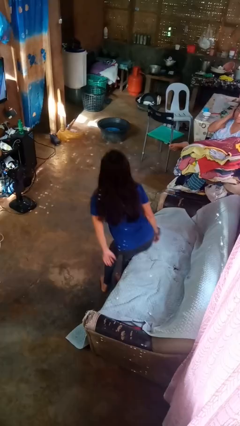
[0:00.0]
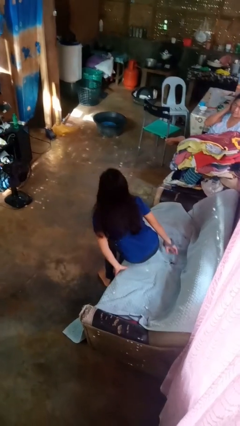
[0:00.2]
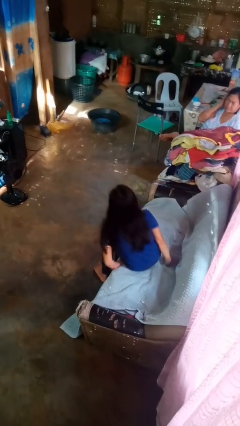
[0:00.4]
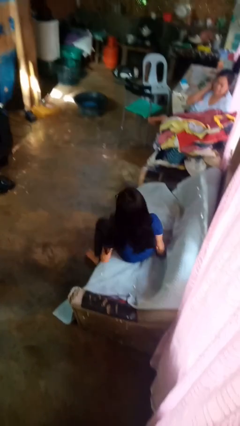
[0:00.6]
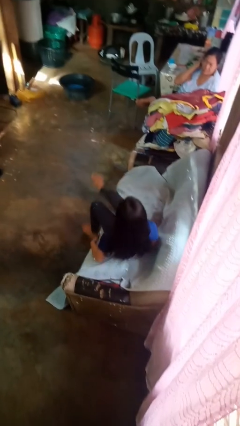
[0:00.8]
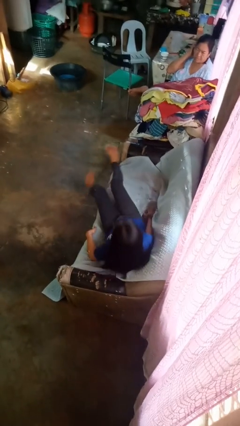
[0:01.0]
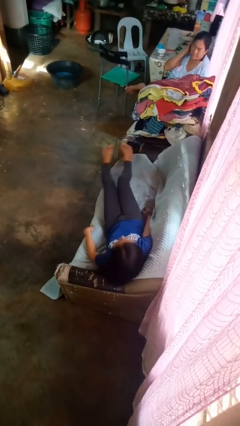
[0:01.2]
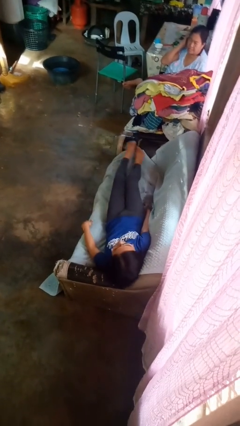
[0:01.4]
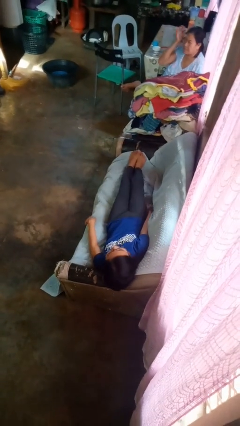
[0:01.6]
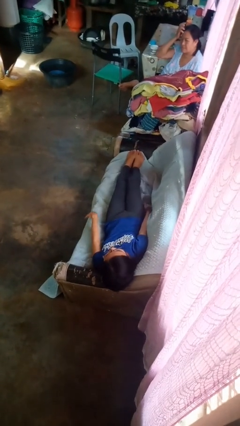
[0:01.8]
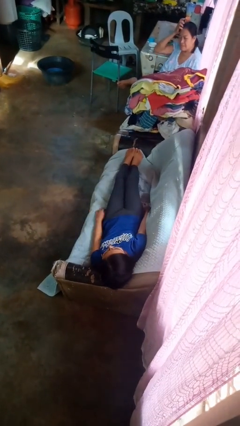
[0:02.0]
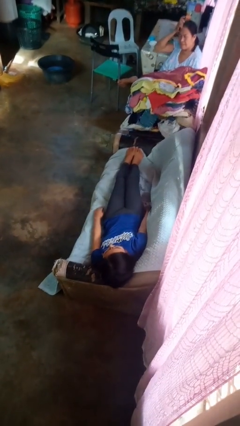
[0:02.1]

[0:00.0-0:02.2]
person lies down on couch

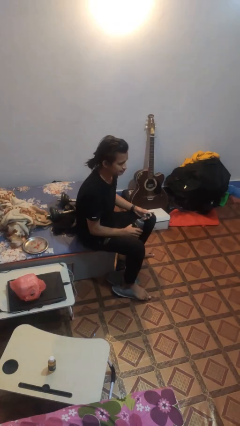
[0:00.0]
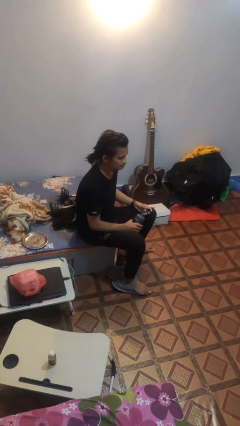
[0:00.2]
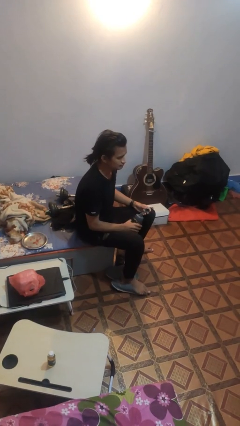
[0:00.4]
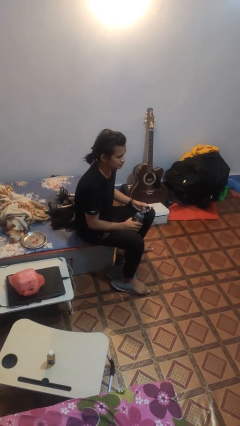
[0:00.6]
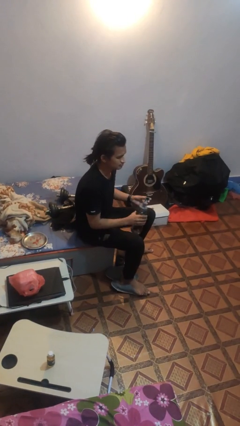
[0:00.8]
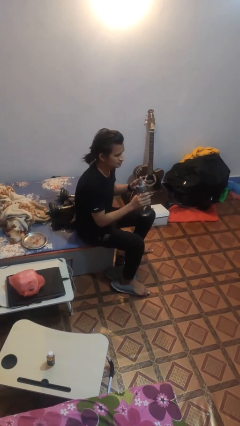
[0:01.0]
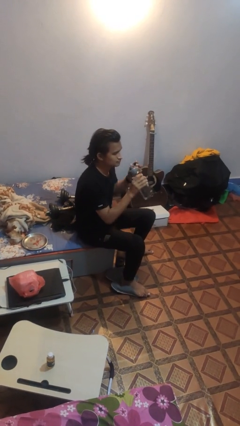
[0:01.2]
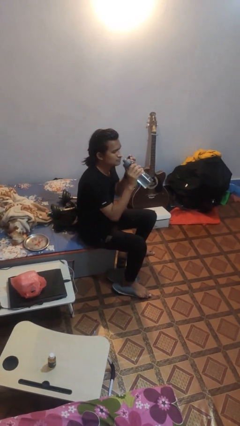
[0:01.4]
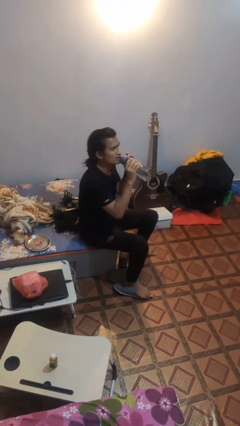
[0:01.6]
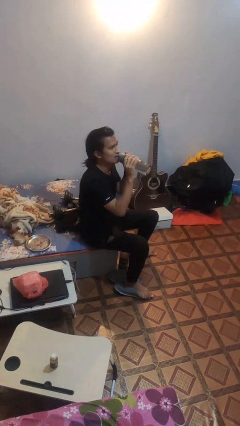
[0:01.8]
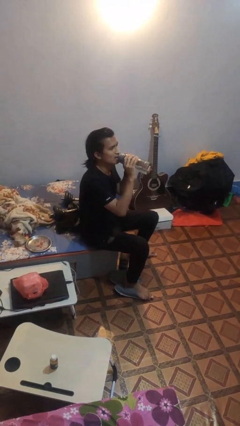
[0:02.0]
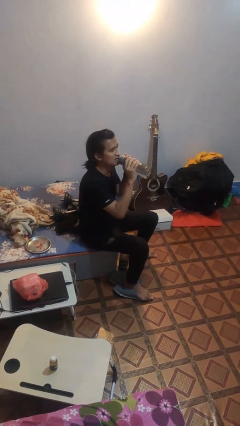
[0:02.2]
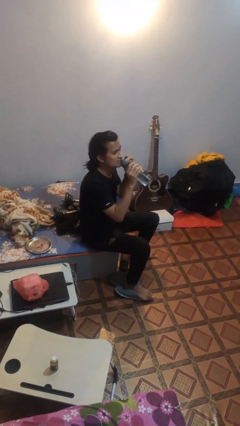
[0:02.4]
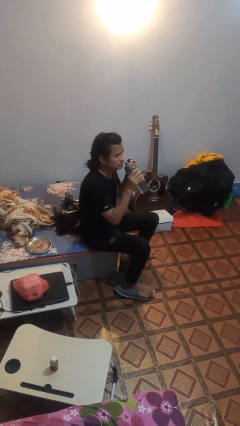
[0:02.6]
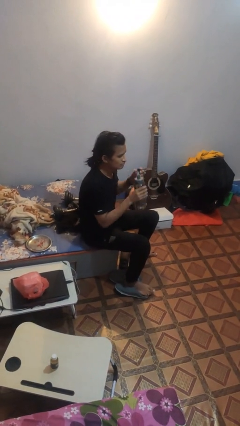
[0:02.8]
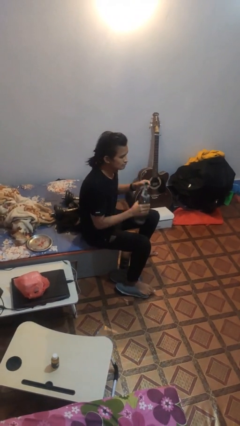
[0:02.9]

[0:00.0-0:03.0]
person drinks from bottle

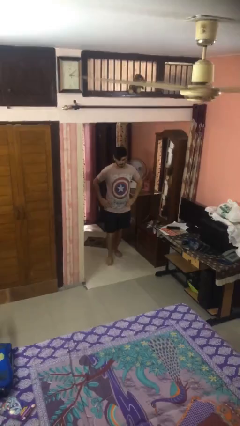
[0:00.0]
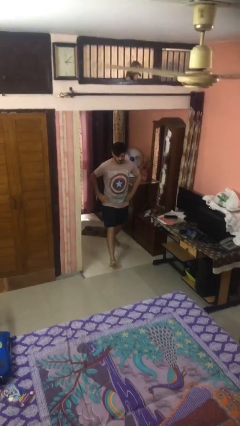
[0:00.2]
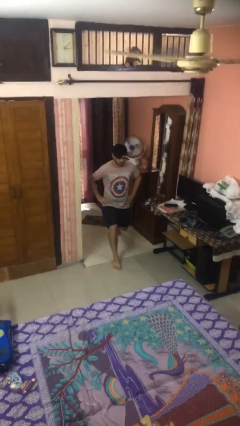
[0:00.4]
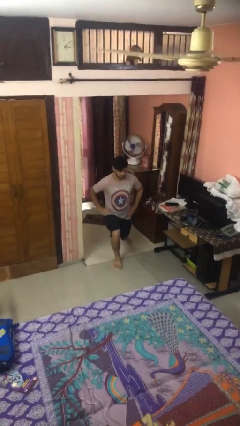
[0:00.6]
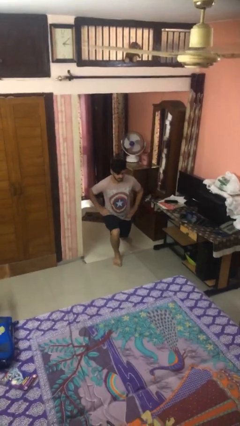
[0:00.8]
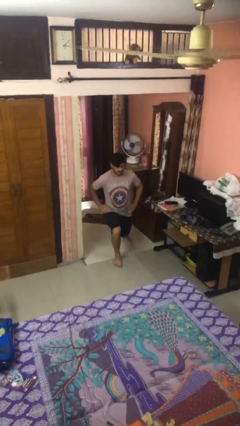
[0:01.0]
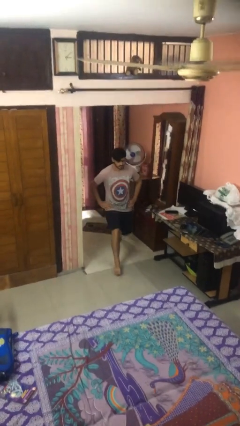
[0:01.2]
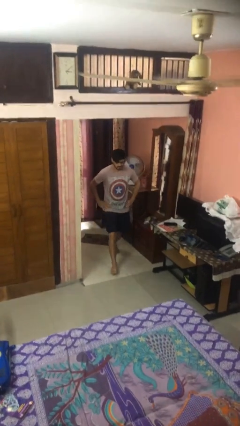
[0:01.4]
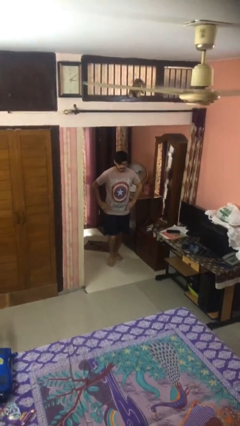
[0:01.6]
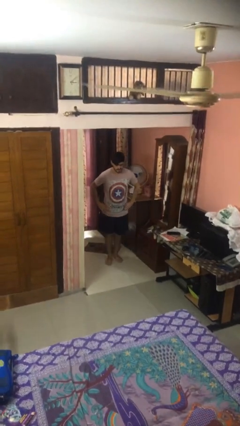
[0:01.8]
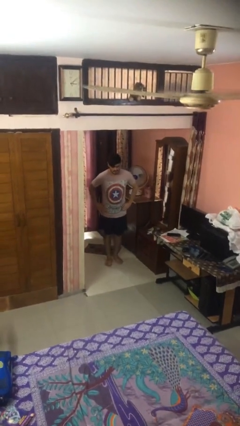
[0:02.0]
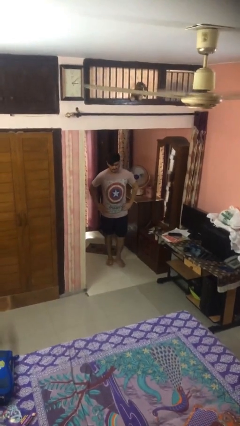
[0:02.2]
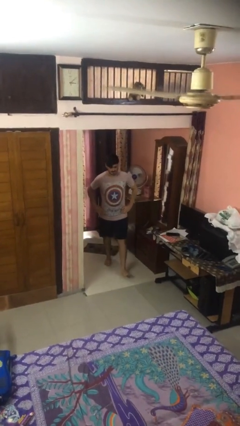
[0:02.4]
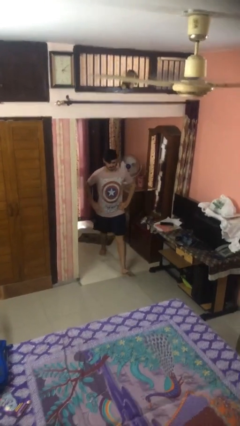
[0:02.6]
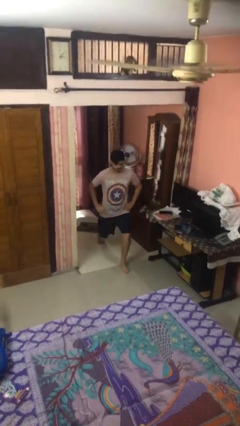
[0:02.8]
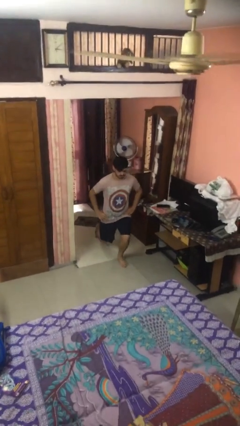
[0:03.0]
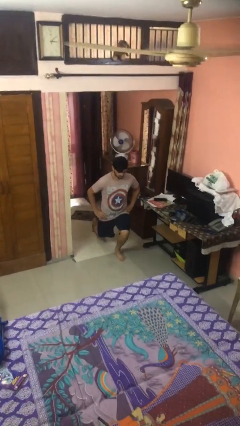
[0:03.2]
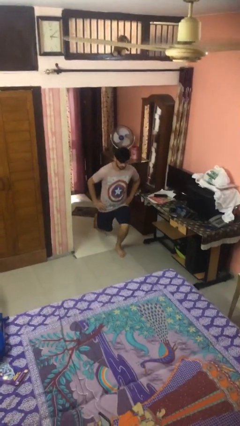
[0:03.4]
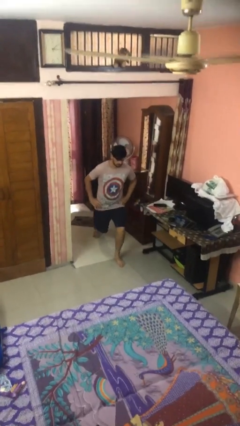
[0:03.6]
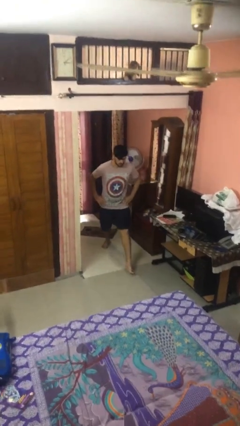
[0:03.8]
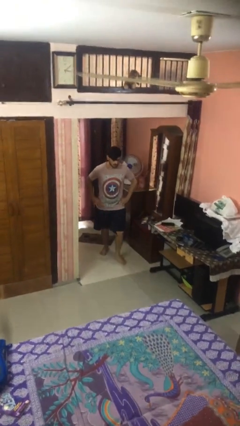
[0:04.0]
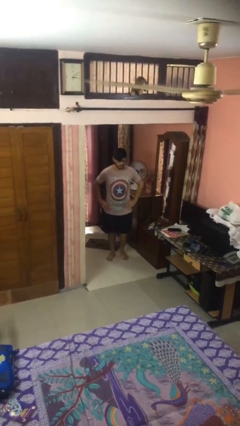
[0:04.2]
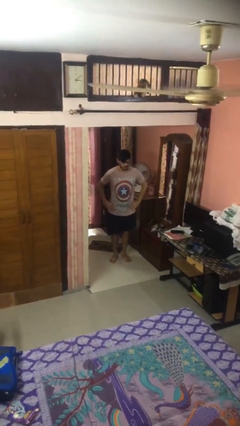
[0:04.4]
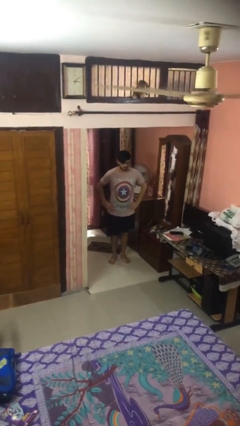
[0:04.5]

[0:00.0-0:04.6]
person exercises with lunges

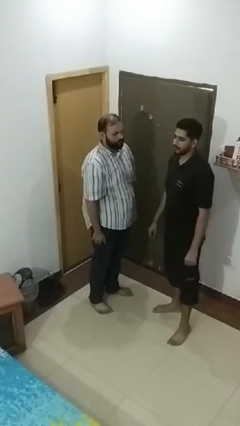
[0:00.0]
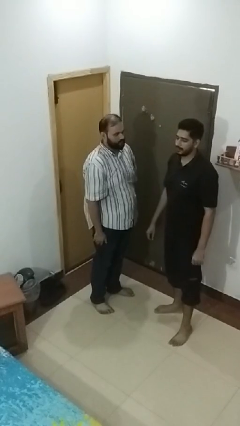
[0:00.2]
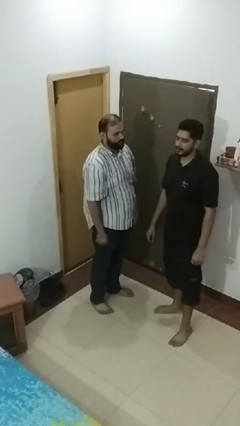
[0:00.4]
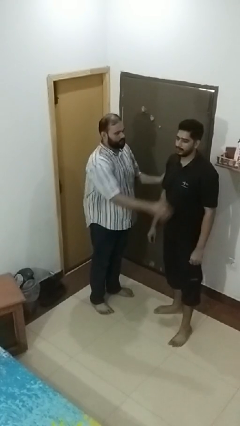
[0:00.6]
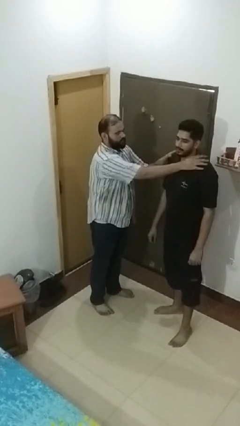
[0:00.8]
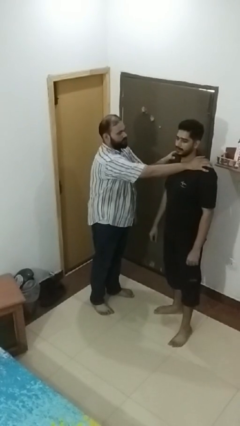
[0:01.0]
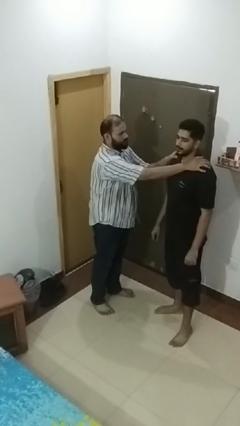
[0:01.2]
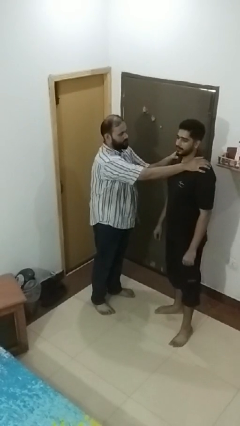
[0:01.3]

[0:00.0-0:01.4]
person grabs person by shoulder

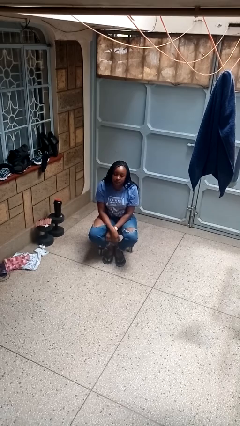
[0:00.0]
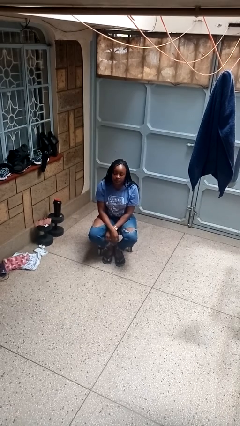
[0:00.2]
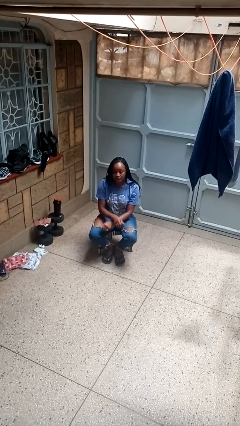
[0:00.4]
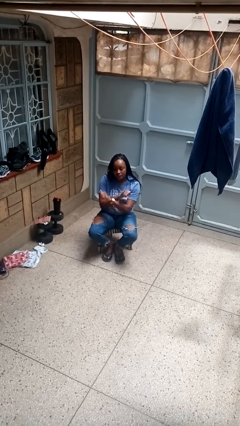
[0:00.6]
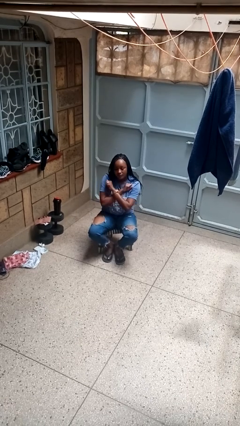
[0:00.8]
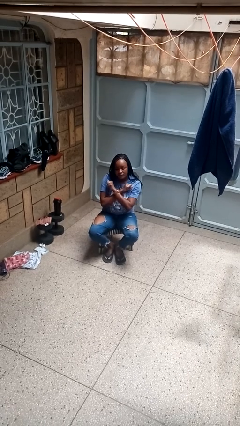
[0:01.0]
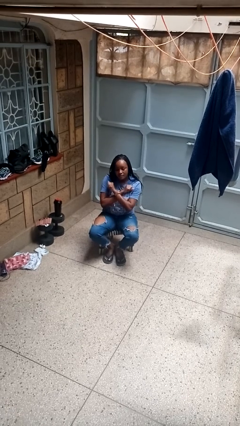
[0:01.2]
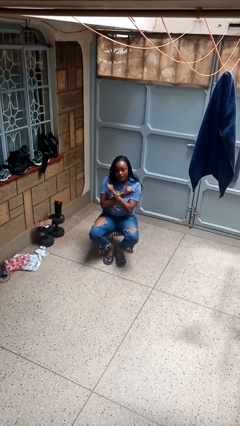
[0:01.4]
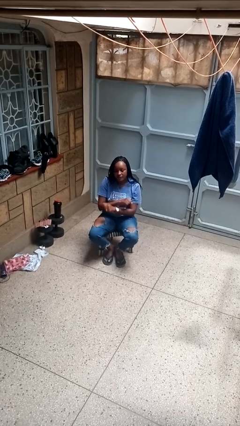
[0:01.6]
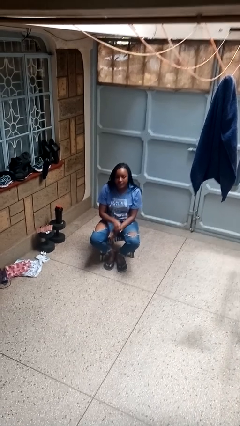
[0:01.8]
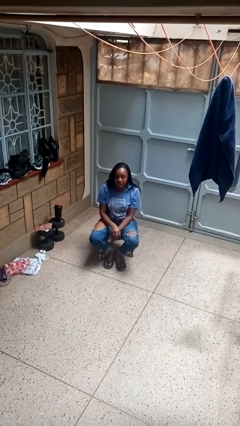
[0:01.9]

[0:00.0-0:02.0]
person gestures arms x

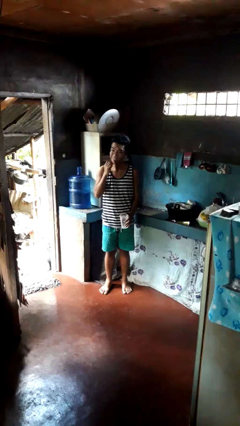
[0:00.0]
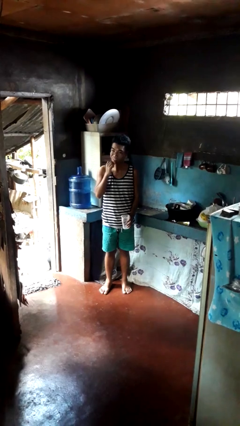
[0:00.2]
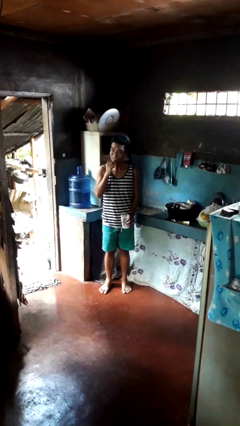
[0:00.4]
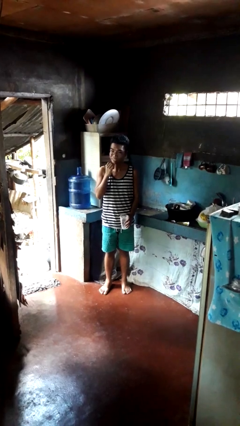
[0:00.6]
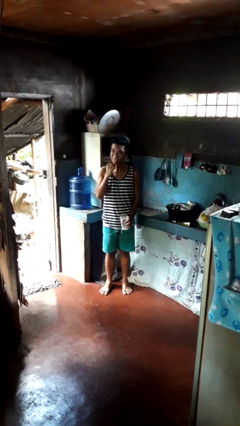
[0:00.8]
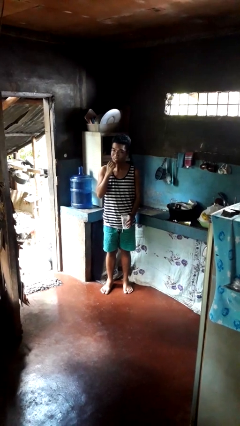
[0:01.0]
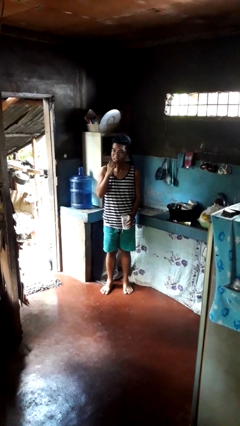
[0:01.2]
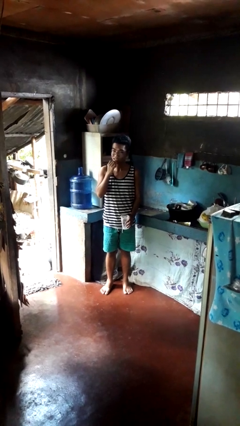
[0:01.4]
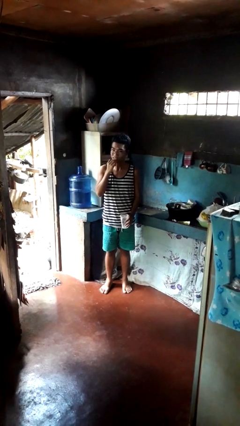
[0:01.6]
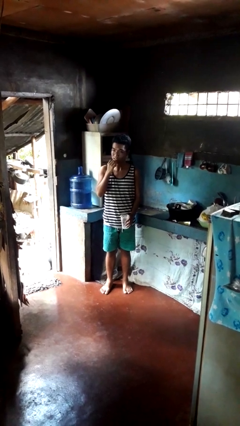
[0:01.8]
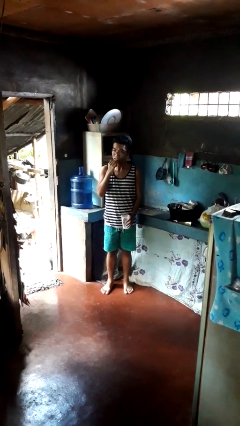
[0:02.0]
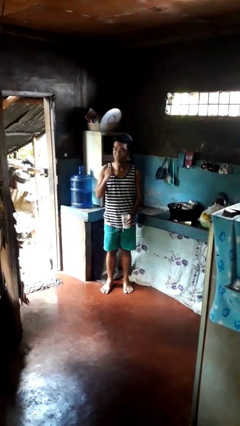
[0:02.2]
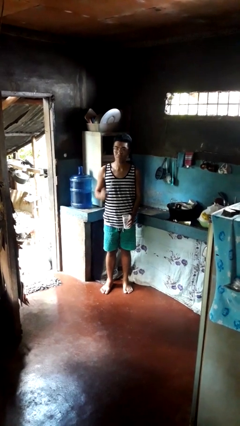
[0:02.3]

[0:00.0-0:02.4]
person brushes teeth

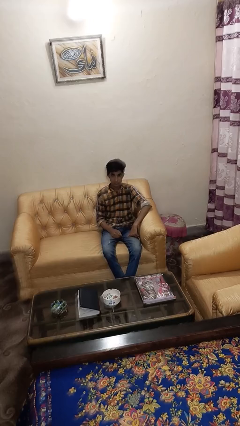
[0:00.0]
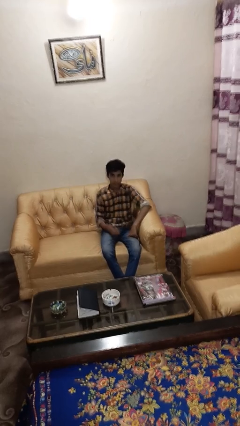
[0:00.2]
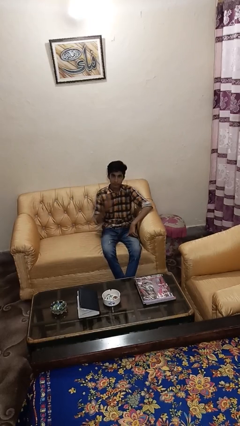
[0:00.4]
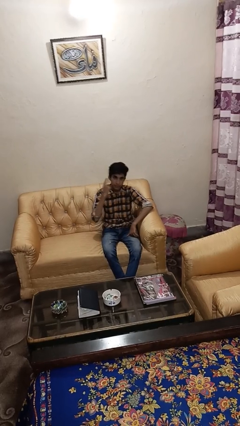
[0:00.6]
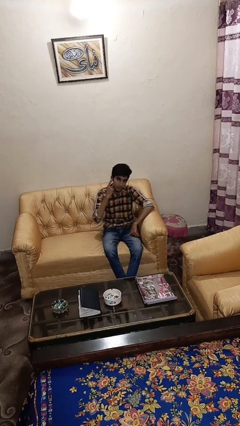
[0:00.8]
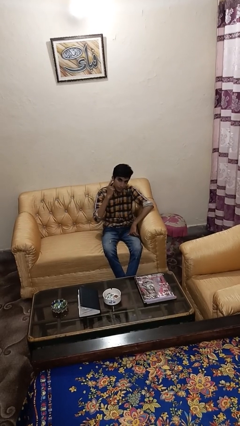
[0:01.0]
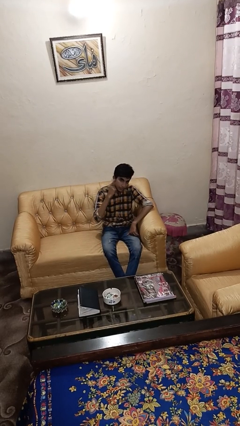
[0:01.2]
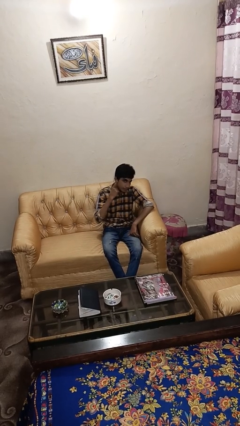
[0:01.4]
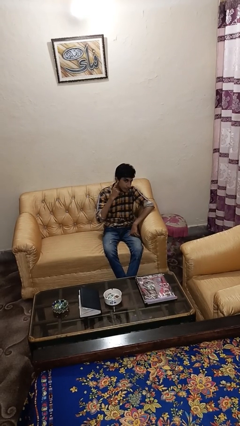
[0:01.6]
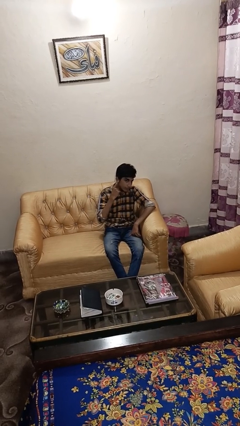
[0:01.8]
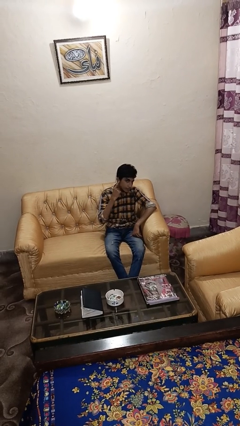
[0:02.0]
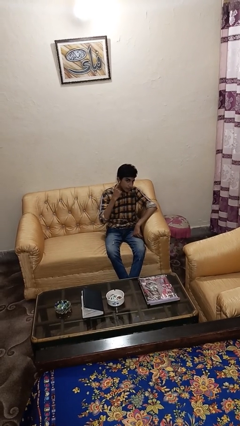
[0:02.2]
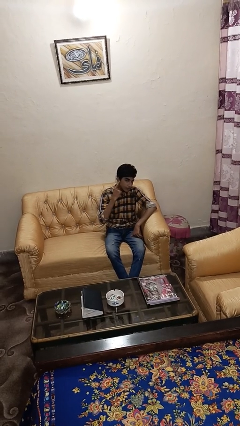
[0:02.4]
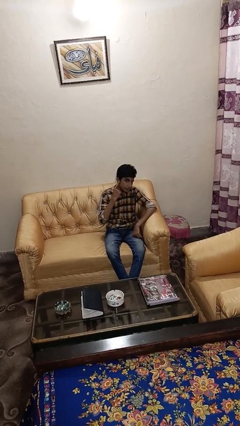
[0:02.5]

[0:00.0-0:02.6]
person gestures listen closely
